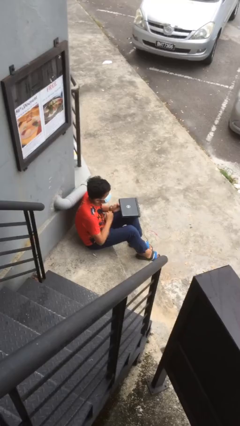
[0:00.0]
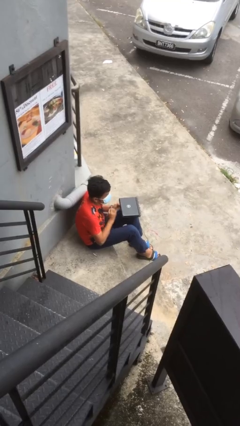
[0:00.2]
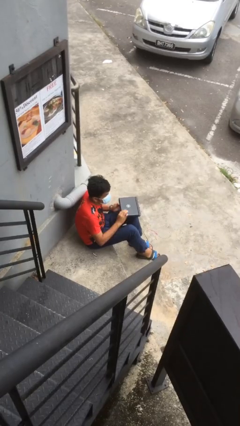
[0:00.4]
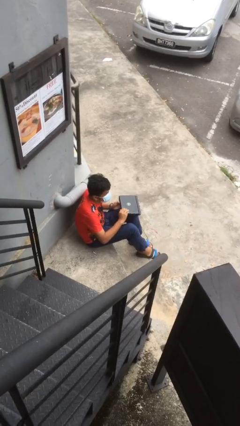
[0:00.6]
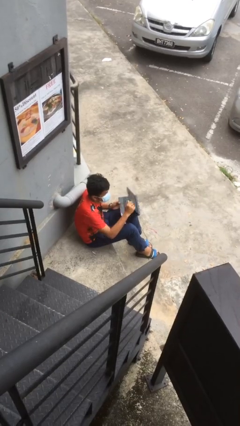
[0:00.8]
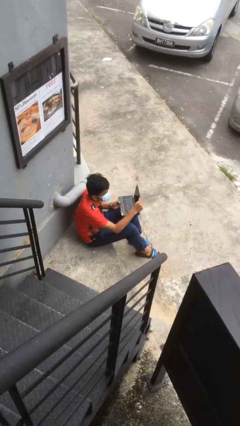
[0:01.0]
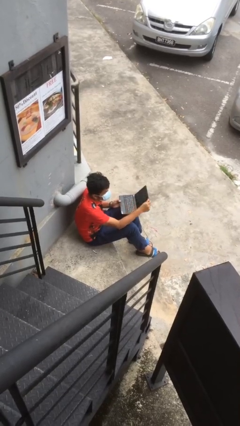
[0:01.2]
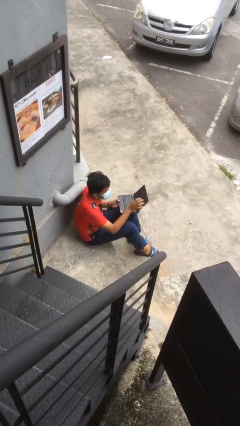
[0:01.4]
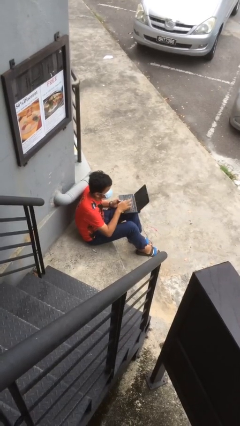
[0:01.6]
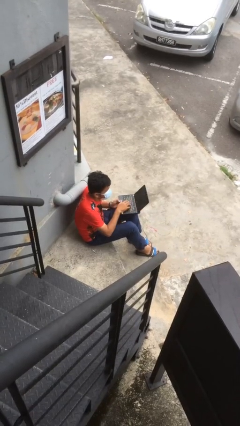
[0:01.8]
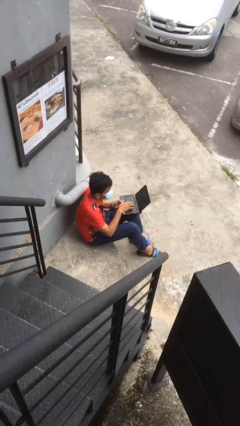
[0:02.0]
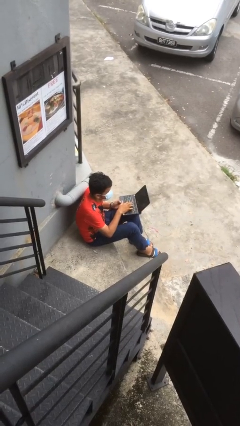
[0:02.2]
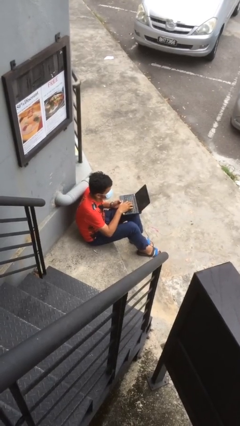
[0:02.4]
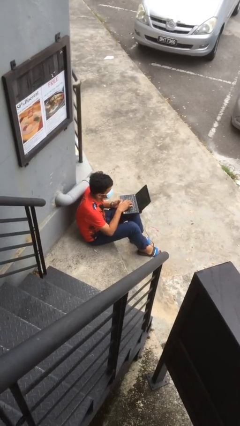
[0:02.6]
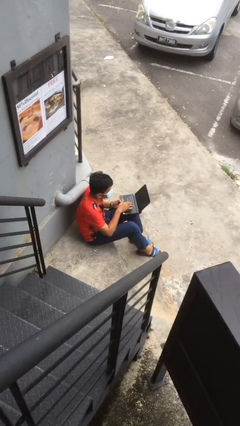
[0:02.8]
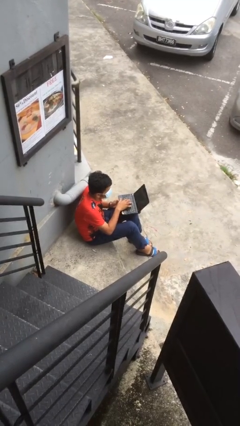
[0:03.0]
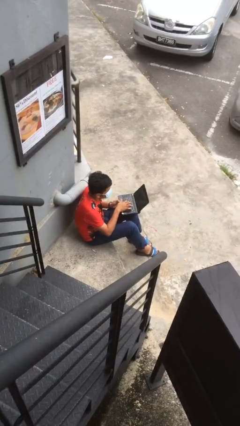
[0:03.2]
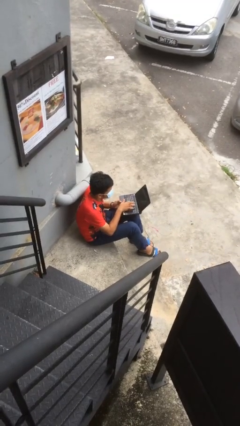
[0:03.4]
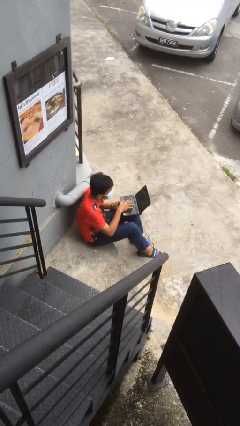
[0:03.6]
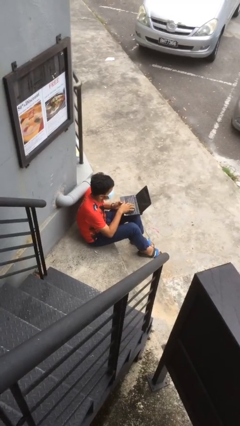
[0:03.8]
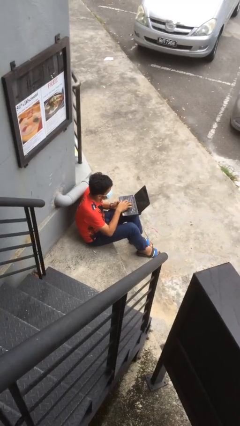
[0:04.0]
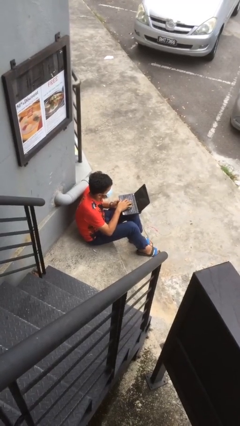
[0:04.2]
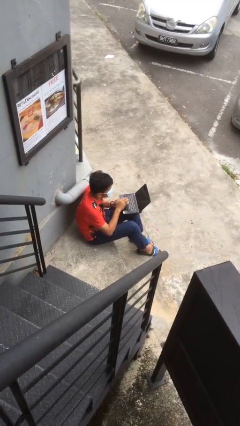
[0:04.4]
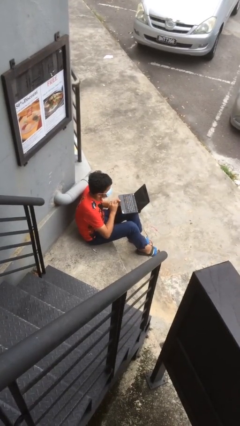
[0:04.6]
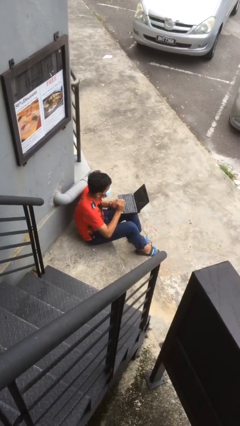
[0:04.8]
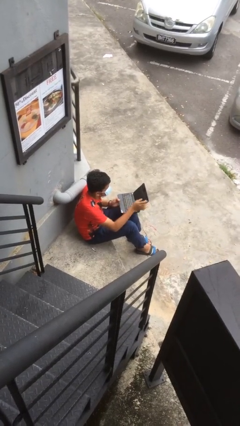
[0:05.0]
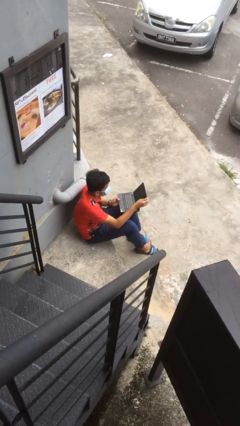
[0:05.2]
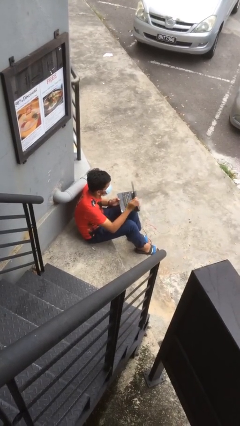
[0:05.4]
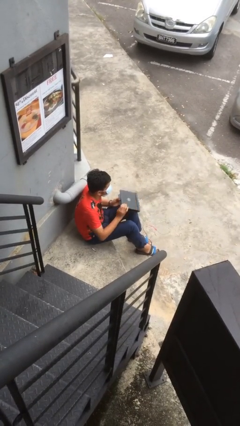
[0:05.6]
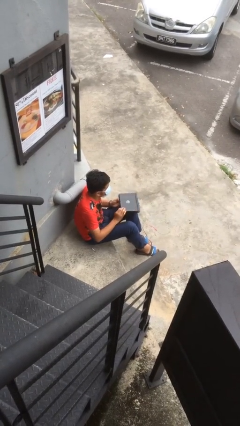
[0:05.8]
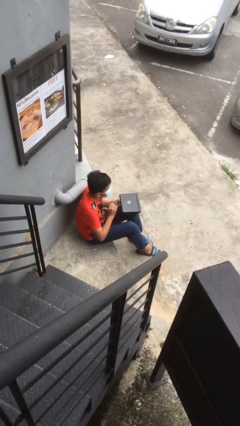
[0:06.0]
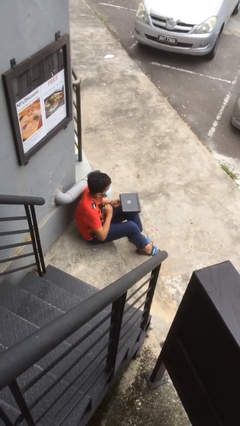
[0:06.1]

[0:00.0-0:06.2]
person interacts with laptop

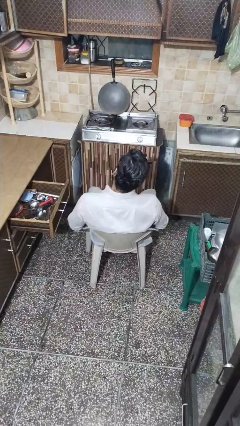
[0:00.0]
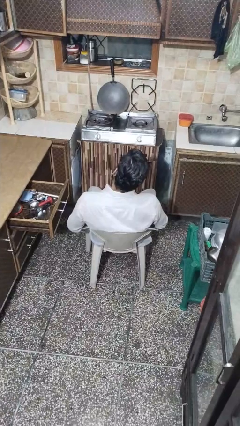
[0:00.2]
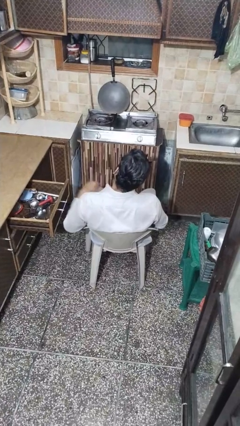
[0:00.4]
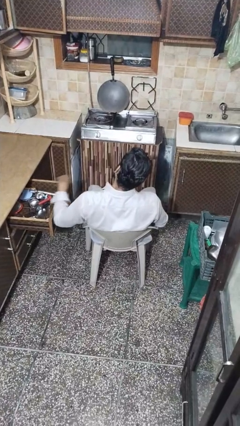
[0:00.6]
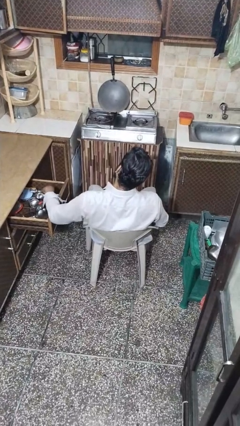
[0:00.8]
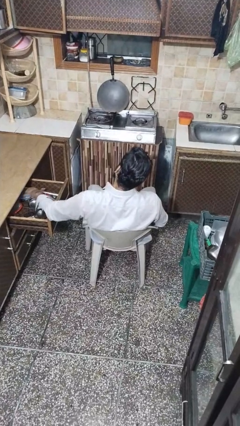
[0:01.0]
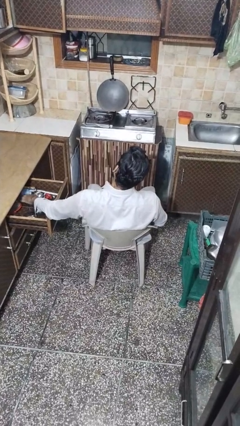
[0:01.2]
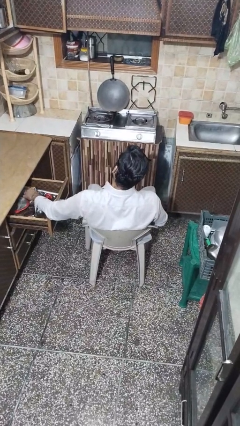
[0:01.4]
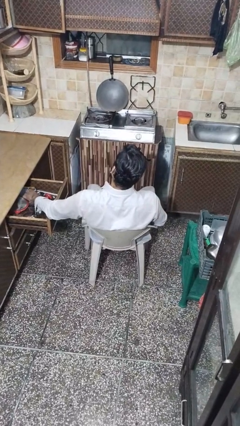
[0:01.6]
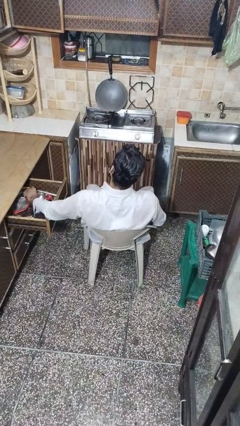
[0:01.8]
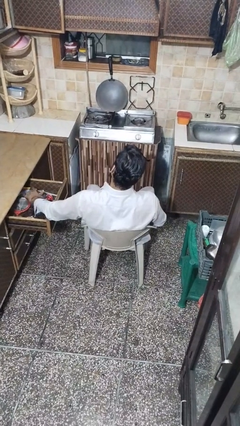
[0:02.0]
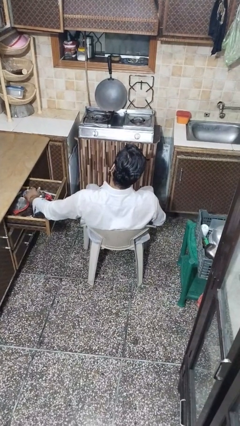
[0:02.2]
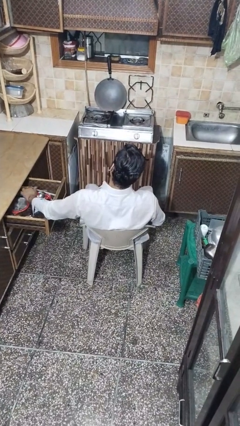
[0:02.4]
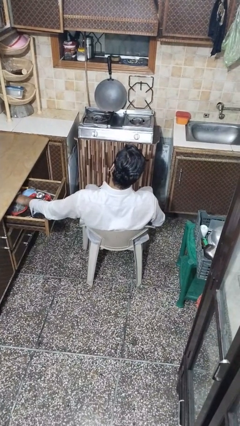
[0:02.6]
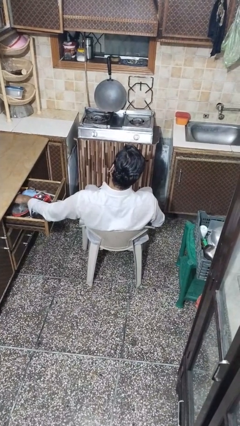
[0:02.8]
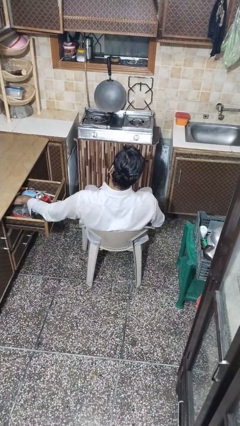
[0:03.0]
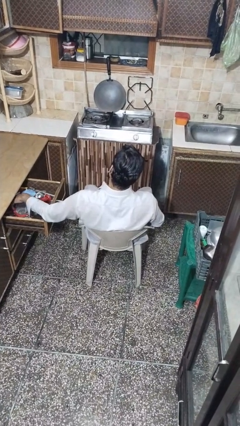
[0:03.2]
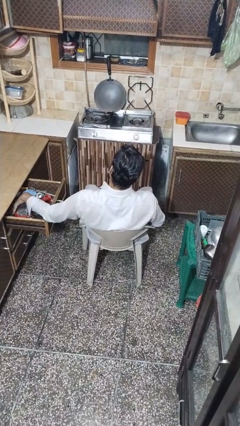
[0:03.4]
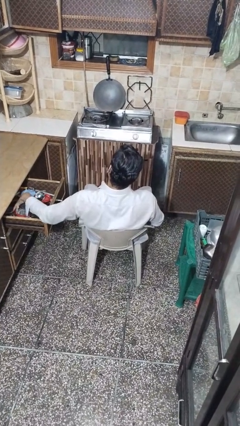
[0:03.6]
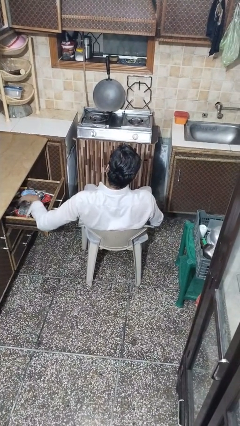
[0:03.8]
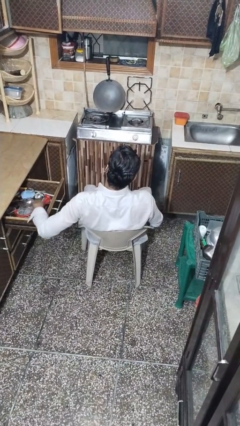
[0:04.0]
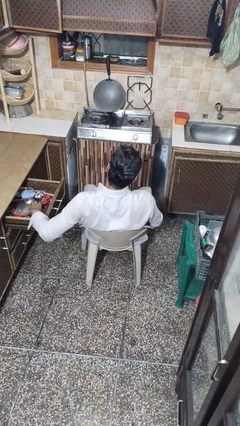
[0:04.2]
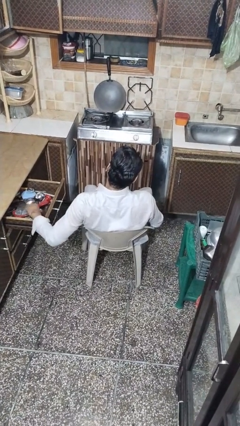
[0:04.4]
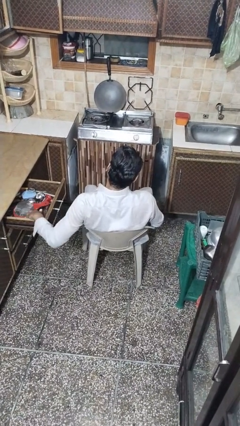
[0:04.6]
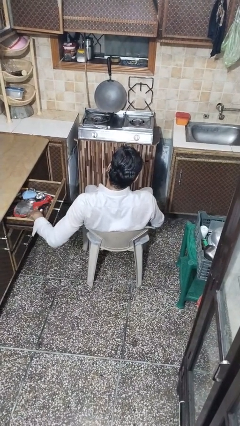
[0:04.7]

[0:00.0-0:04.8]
person searches in kitchen drawer

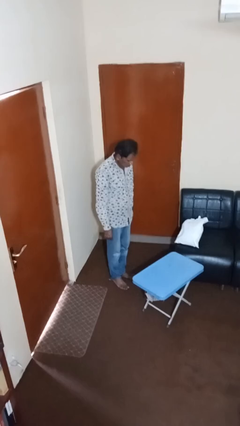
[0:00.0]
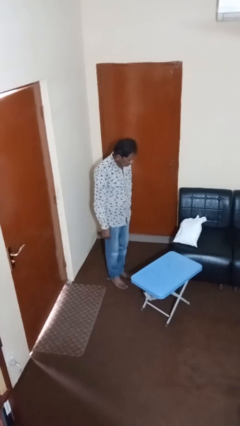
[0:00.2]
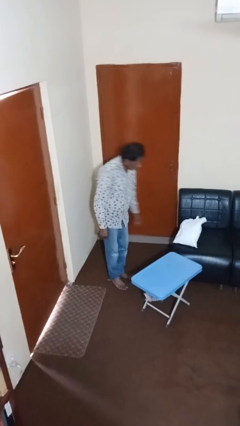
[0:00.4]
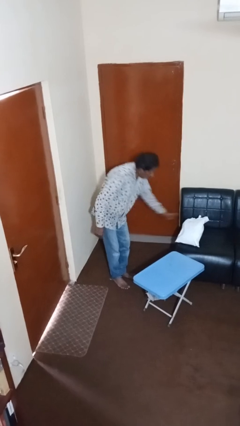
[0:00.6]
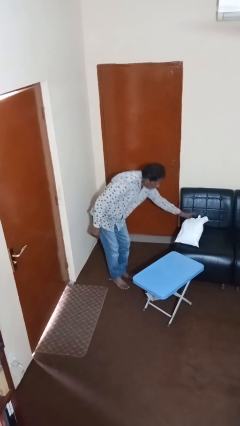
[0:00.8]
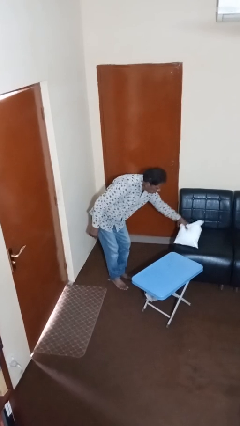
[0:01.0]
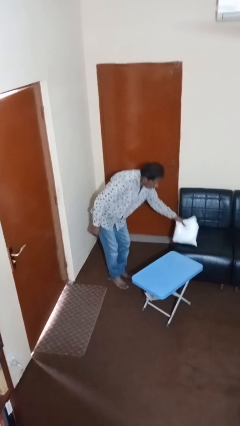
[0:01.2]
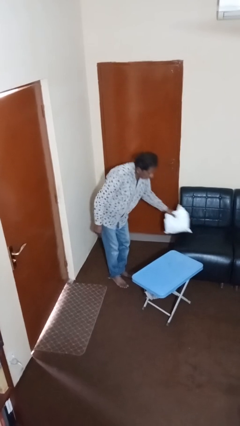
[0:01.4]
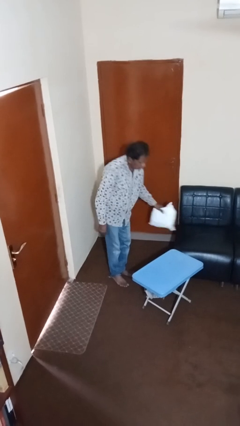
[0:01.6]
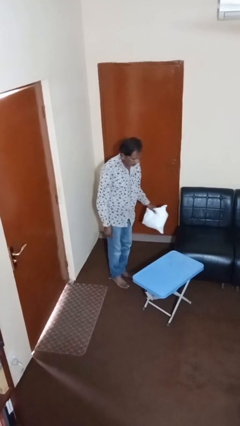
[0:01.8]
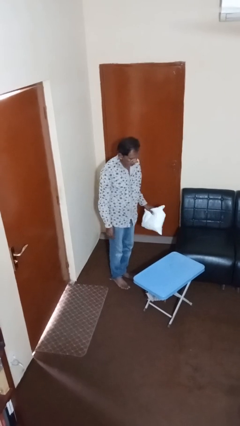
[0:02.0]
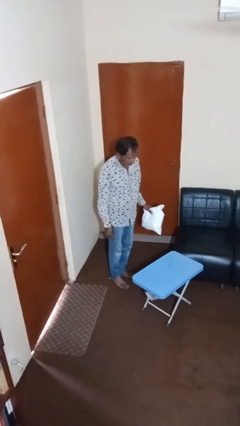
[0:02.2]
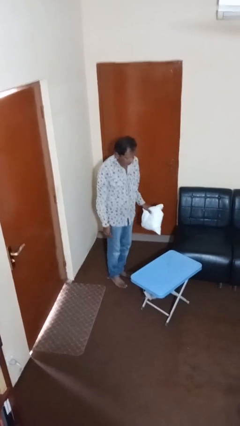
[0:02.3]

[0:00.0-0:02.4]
person picks up object from couch

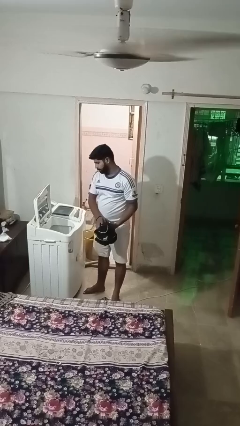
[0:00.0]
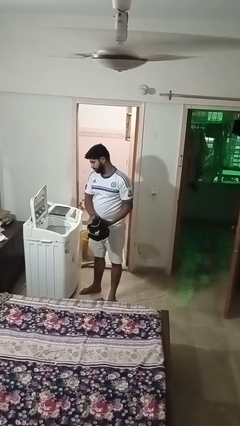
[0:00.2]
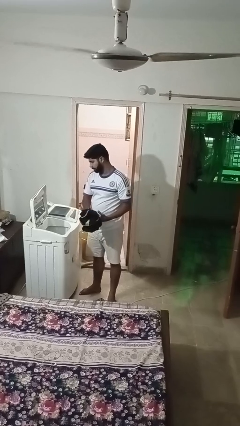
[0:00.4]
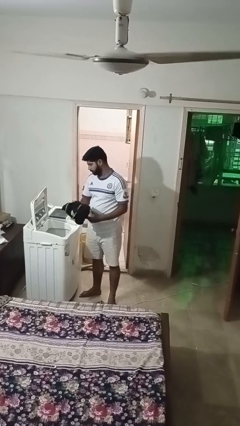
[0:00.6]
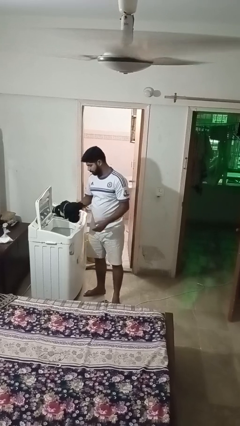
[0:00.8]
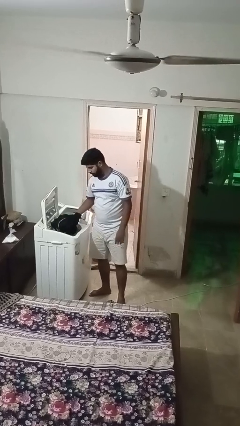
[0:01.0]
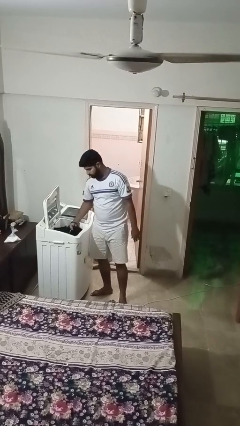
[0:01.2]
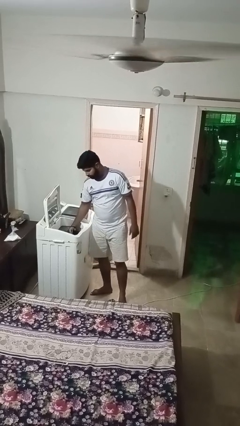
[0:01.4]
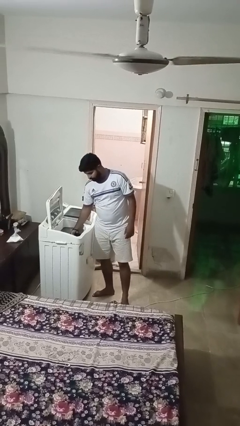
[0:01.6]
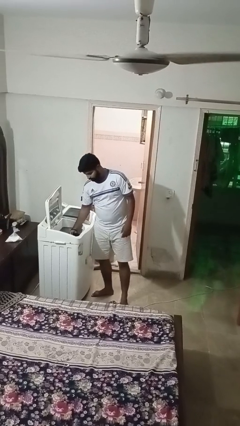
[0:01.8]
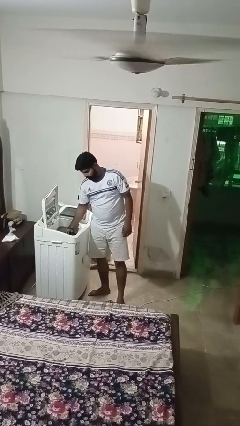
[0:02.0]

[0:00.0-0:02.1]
person loads clotheswasher

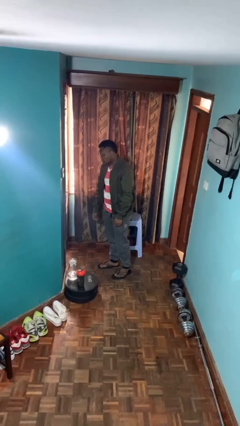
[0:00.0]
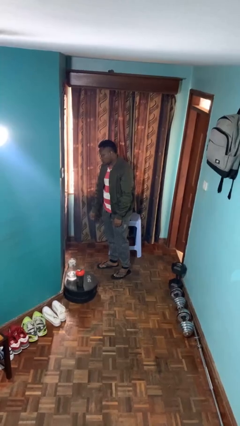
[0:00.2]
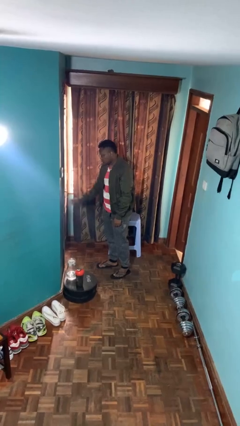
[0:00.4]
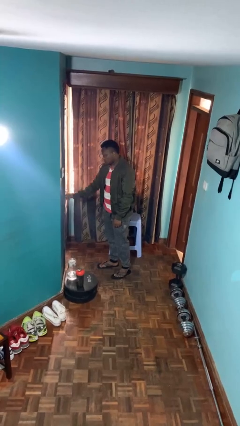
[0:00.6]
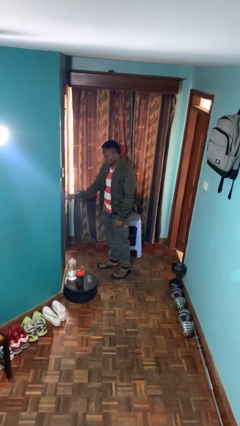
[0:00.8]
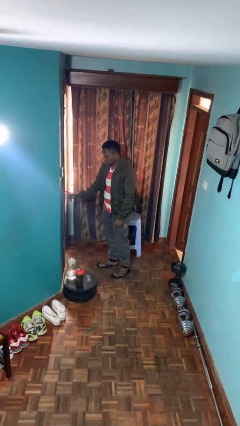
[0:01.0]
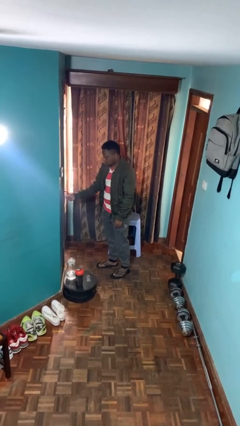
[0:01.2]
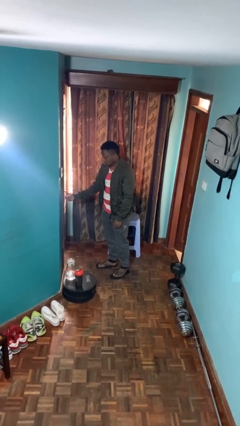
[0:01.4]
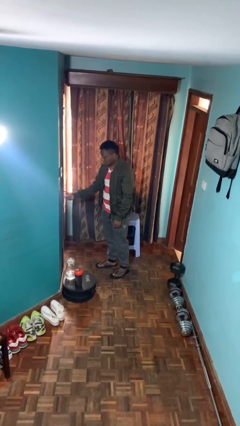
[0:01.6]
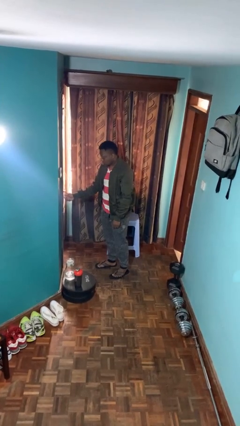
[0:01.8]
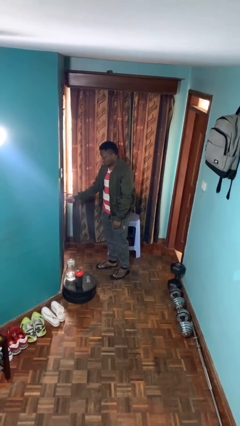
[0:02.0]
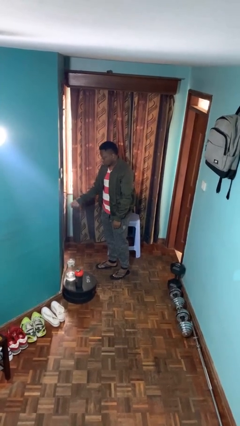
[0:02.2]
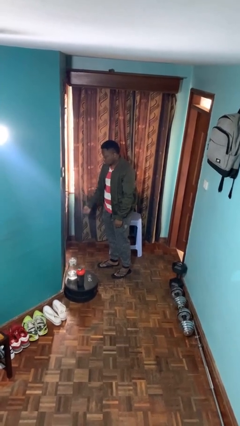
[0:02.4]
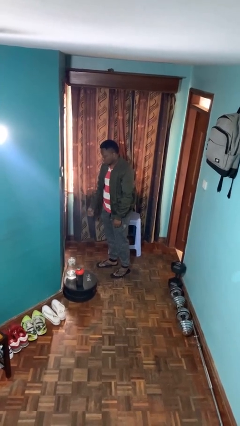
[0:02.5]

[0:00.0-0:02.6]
person unlocks door with keys
